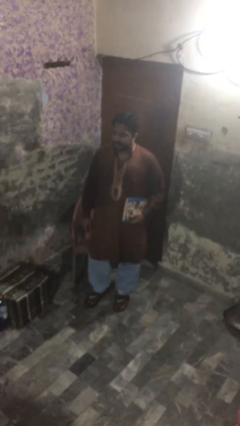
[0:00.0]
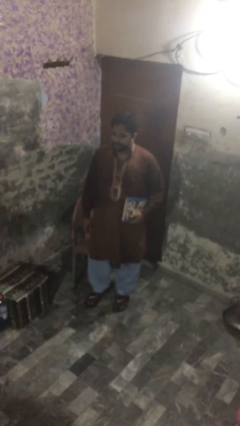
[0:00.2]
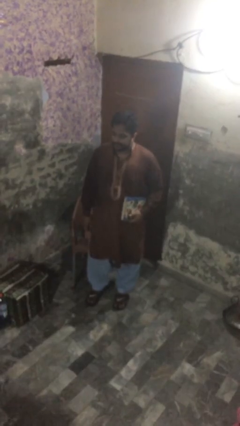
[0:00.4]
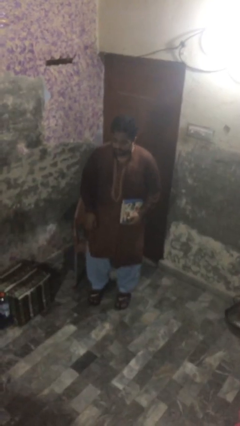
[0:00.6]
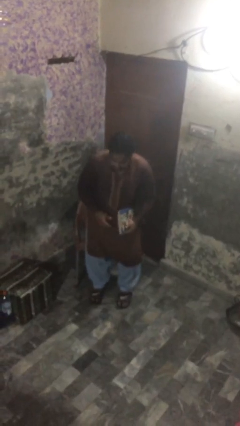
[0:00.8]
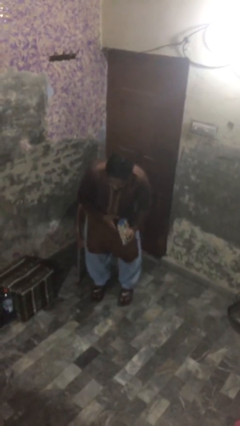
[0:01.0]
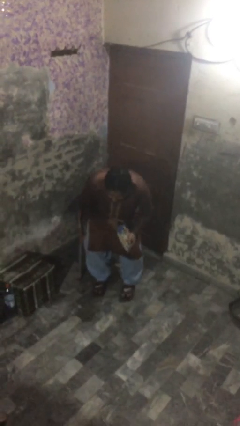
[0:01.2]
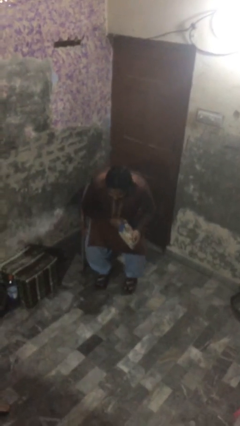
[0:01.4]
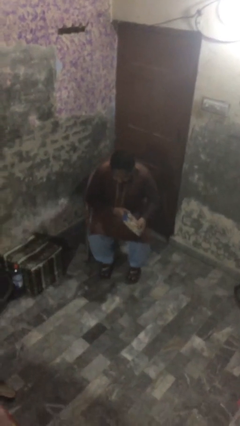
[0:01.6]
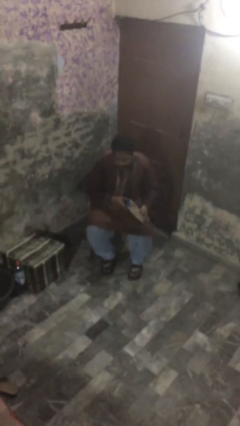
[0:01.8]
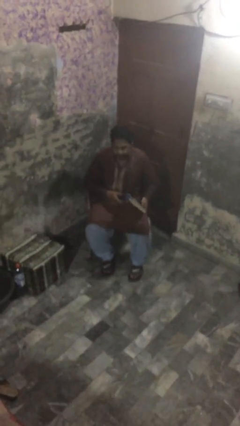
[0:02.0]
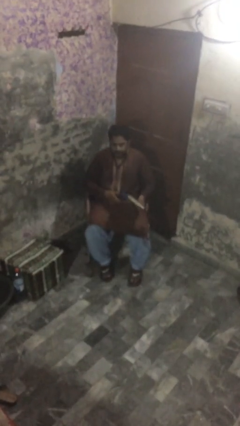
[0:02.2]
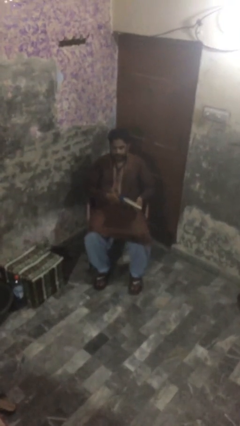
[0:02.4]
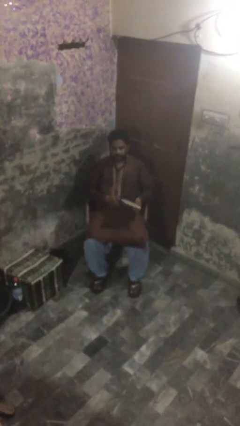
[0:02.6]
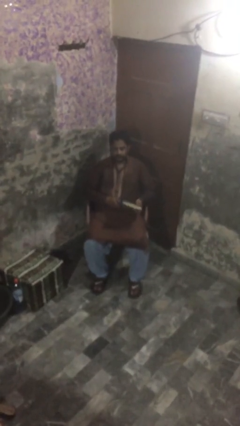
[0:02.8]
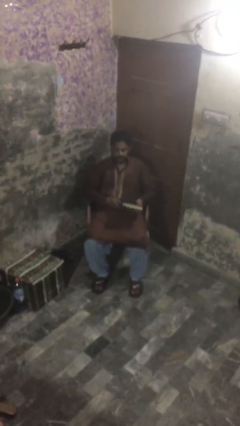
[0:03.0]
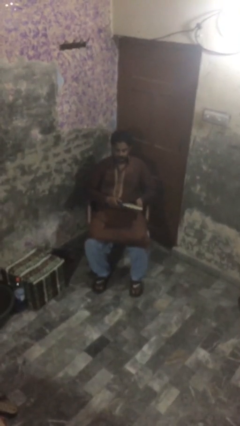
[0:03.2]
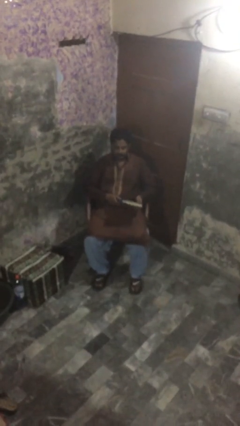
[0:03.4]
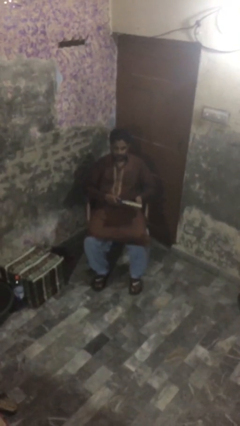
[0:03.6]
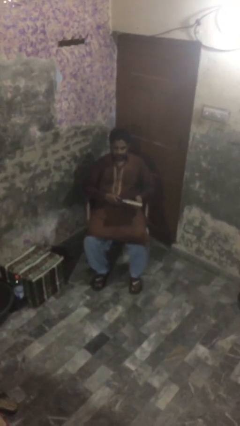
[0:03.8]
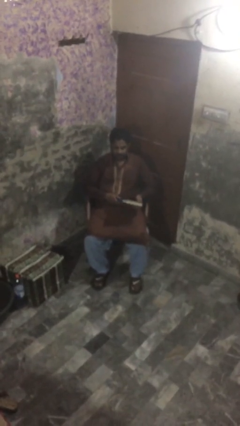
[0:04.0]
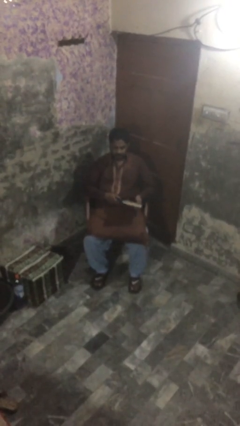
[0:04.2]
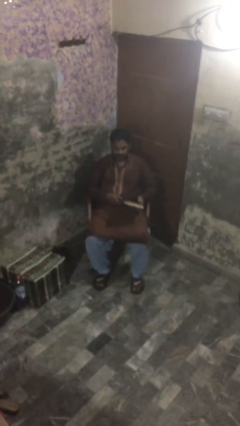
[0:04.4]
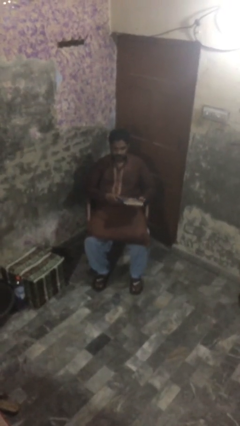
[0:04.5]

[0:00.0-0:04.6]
person sits down

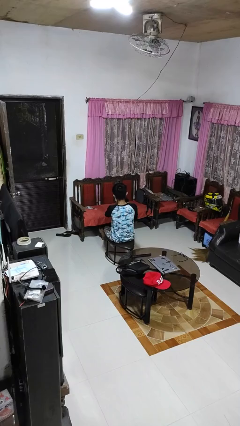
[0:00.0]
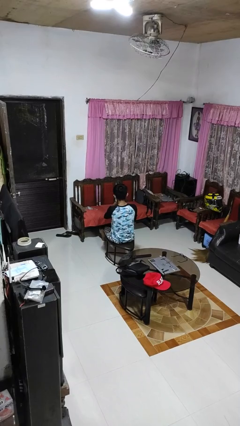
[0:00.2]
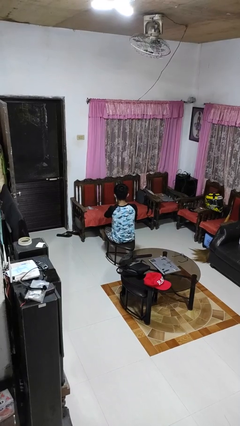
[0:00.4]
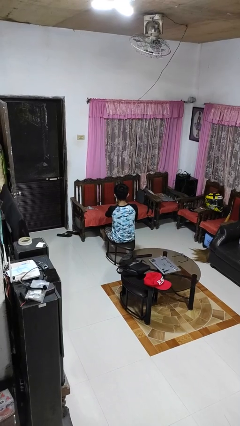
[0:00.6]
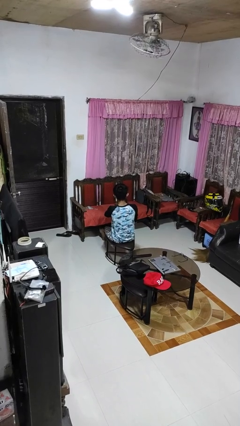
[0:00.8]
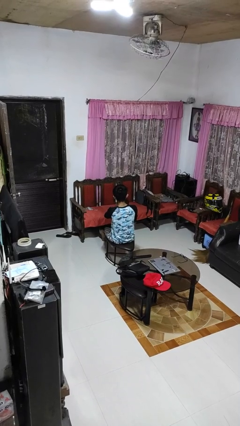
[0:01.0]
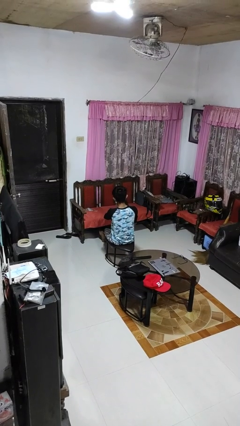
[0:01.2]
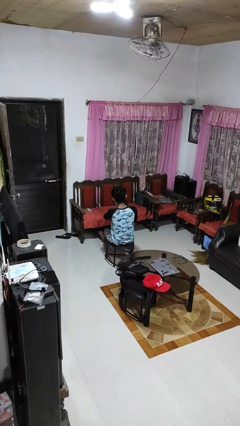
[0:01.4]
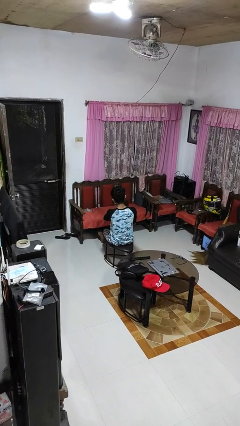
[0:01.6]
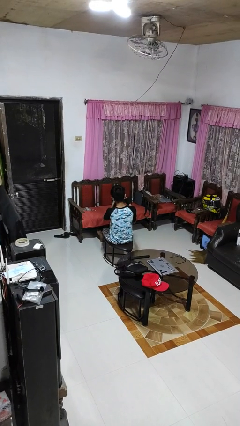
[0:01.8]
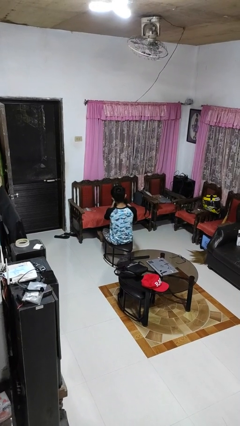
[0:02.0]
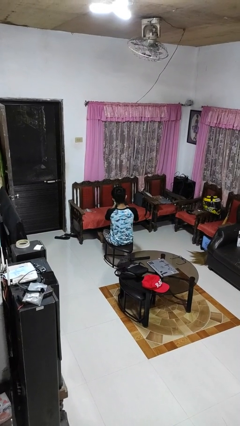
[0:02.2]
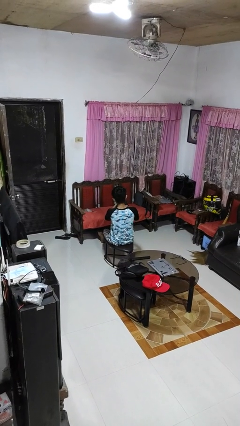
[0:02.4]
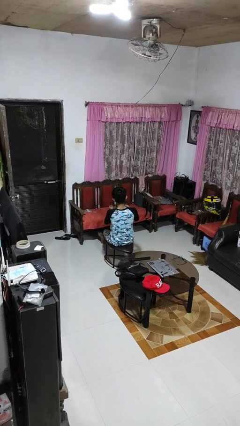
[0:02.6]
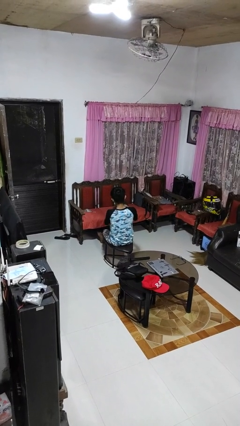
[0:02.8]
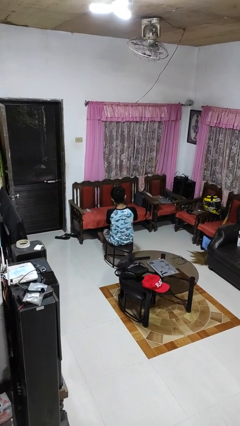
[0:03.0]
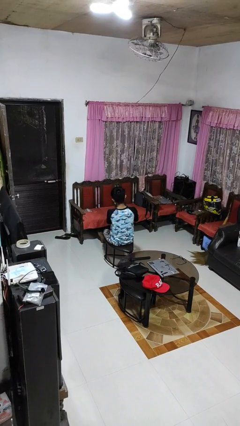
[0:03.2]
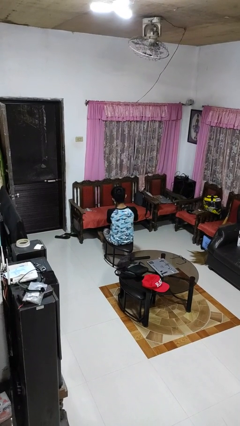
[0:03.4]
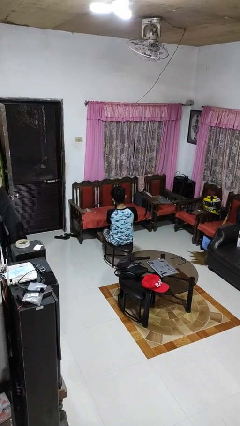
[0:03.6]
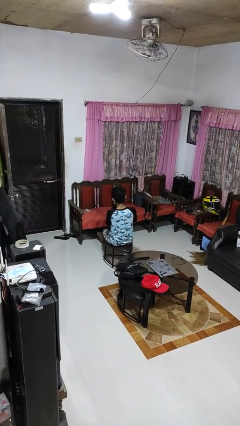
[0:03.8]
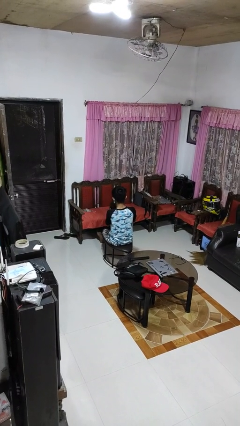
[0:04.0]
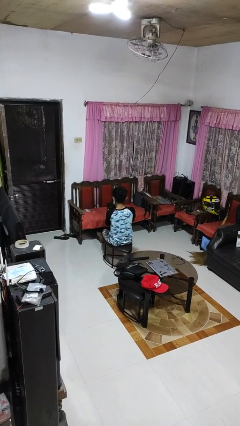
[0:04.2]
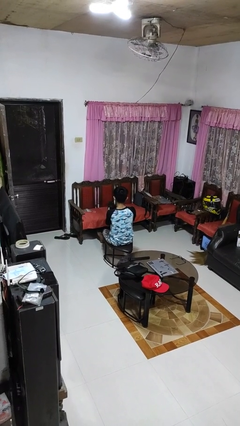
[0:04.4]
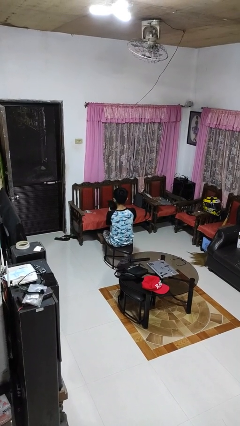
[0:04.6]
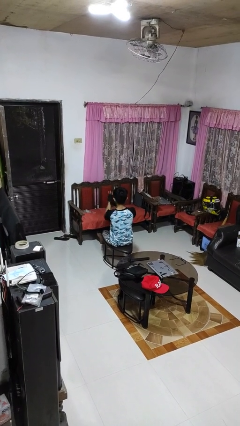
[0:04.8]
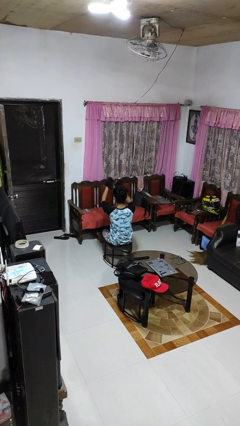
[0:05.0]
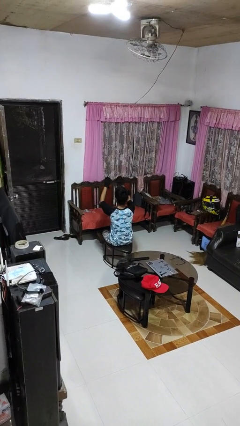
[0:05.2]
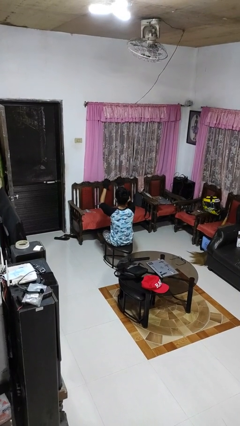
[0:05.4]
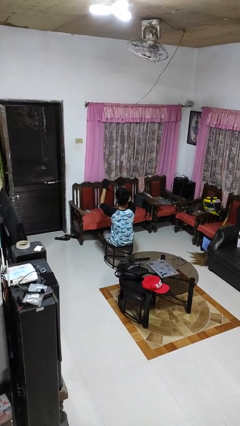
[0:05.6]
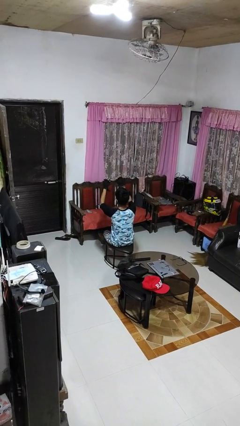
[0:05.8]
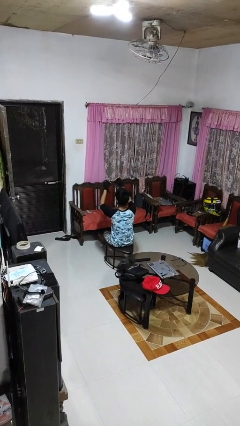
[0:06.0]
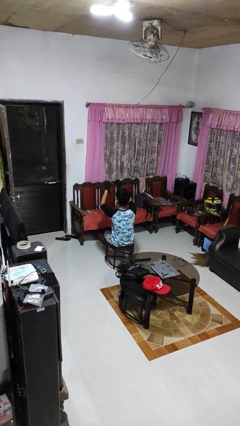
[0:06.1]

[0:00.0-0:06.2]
person puts on gloves

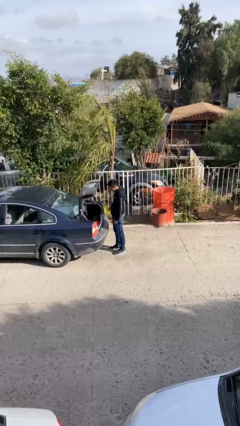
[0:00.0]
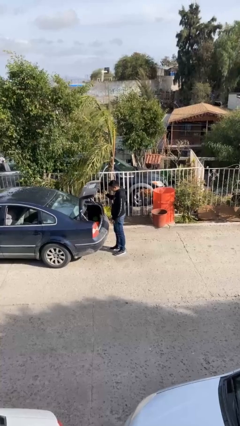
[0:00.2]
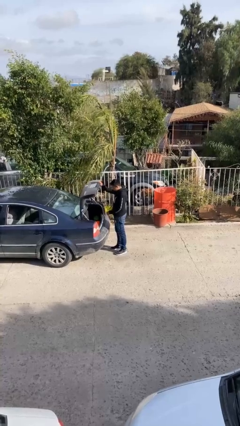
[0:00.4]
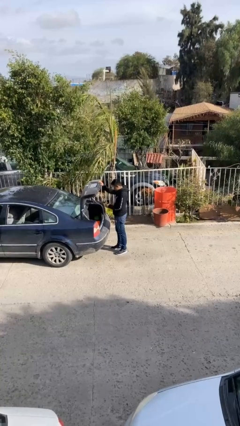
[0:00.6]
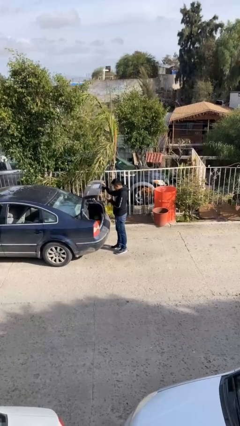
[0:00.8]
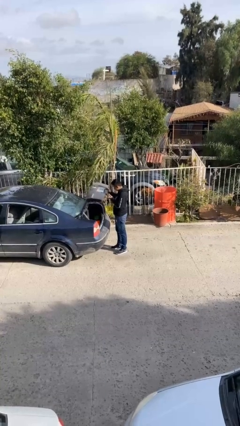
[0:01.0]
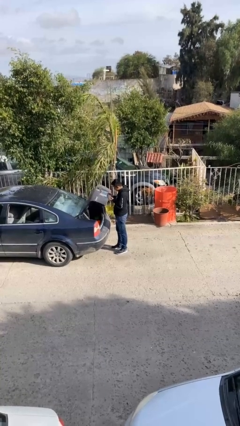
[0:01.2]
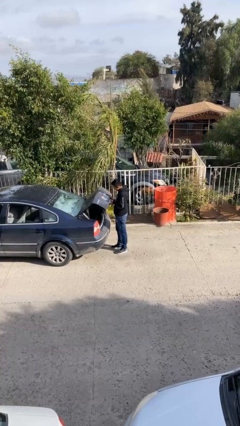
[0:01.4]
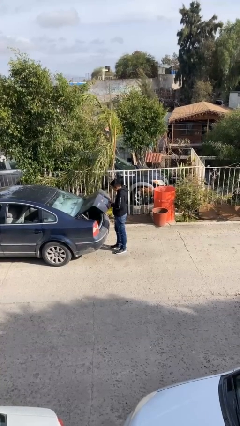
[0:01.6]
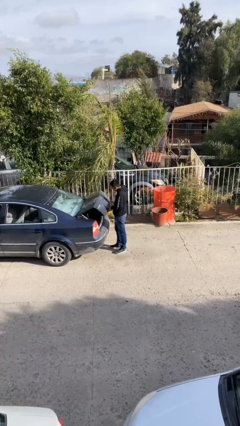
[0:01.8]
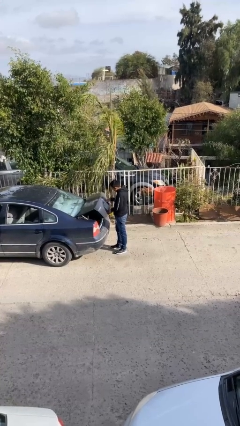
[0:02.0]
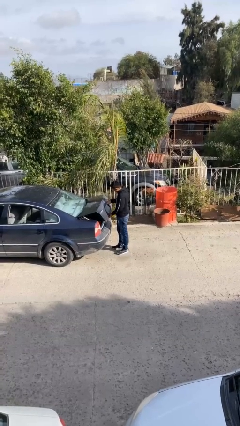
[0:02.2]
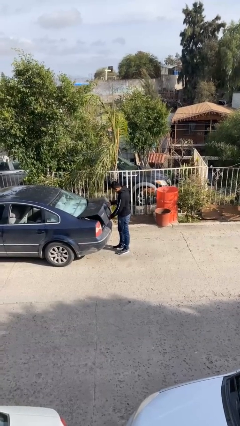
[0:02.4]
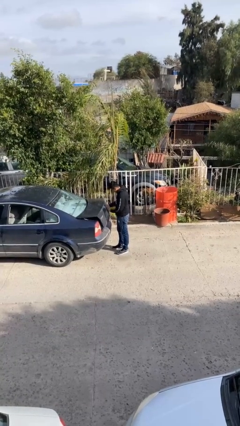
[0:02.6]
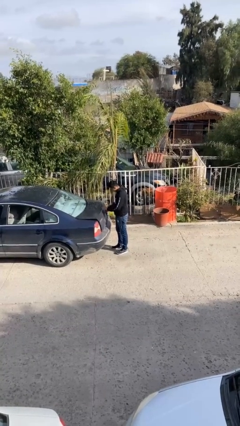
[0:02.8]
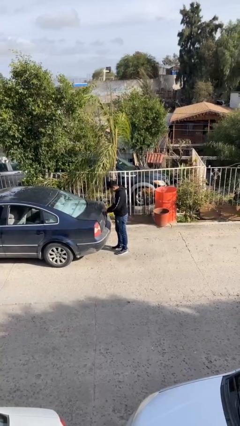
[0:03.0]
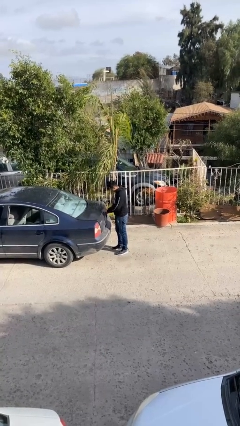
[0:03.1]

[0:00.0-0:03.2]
person closes car trunk

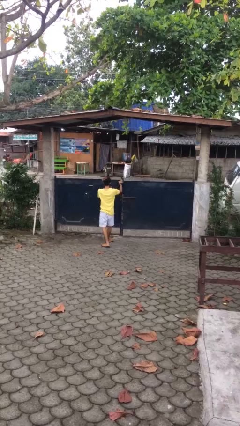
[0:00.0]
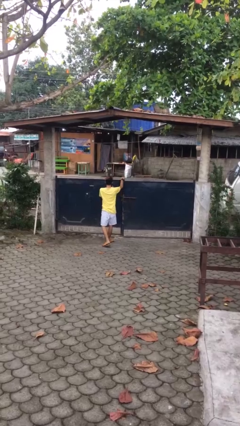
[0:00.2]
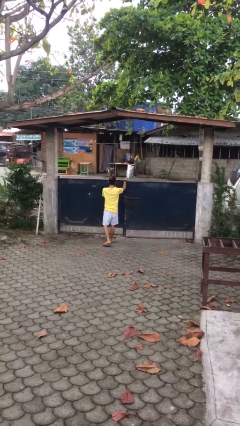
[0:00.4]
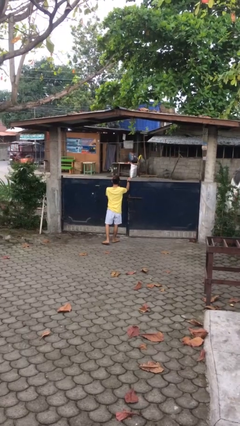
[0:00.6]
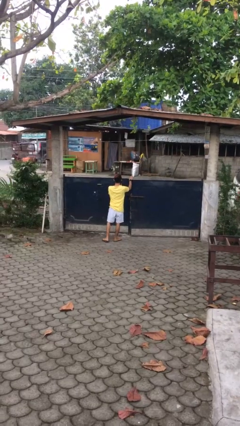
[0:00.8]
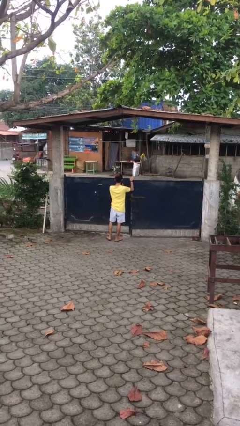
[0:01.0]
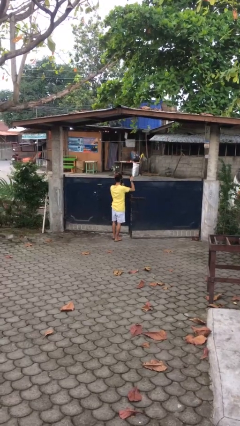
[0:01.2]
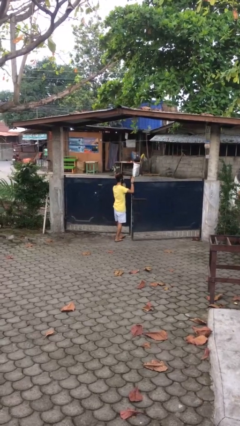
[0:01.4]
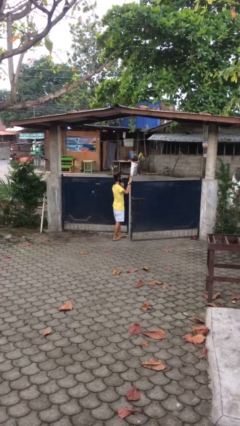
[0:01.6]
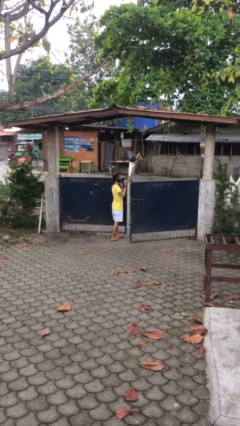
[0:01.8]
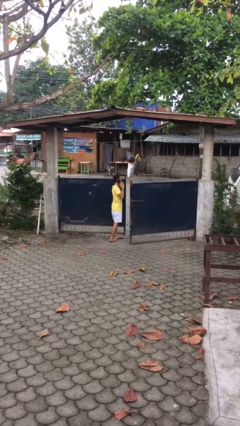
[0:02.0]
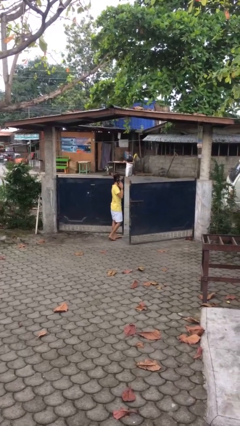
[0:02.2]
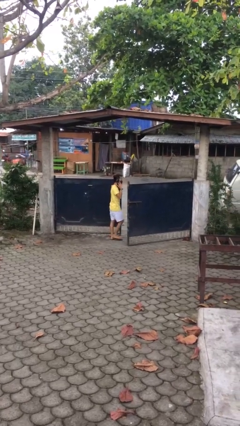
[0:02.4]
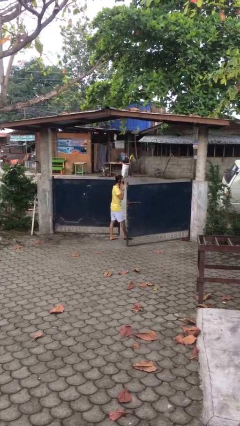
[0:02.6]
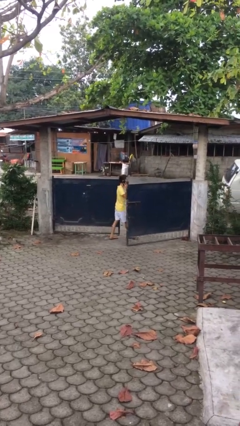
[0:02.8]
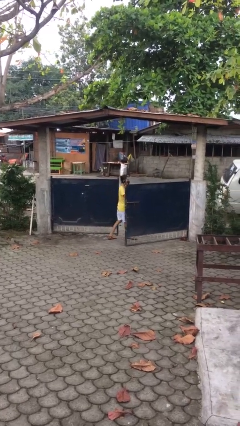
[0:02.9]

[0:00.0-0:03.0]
person opens facility door

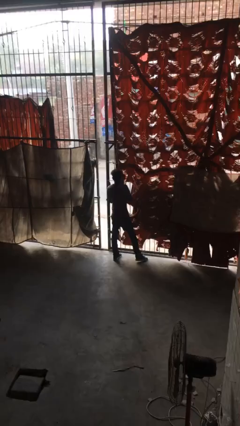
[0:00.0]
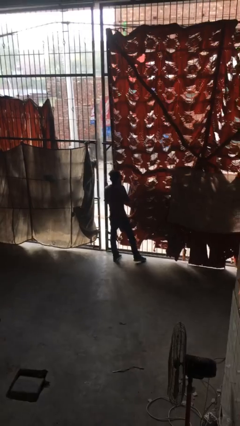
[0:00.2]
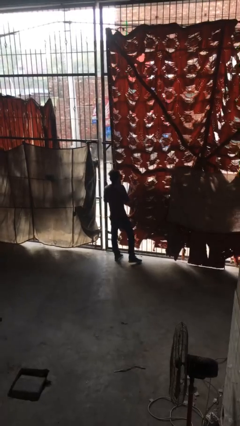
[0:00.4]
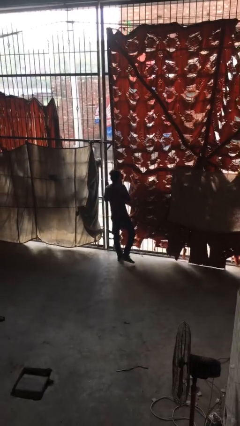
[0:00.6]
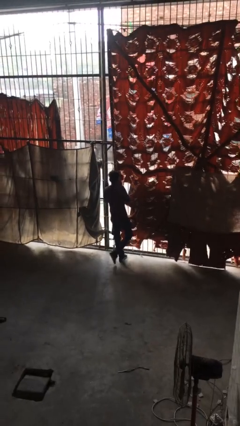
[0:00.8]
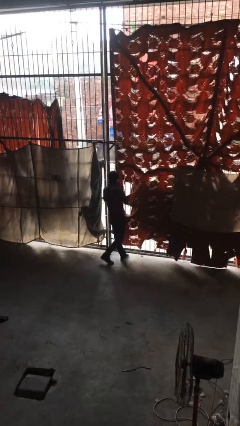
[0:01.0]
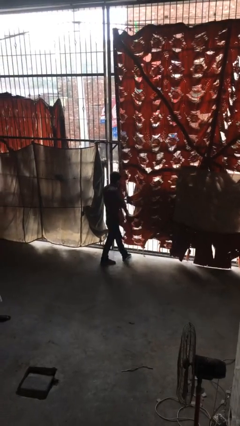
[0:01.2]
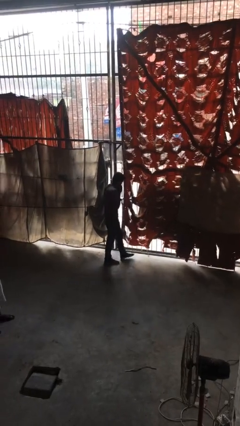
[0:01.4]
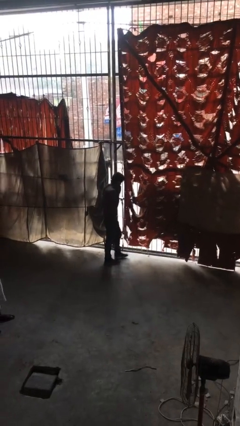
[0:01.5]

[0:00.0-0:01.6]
person closes facility door
